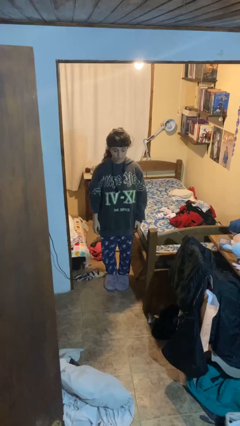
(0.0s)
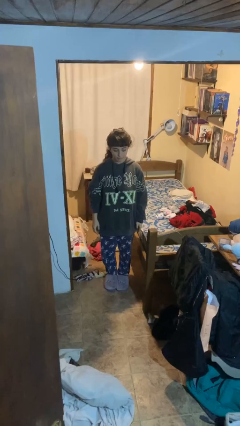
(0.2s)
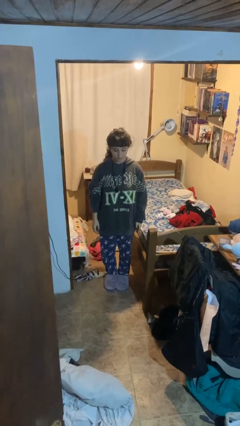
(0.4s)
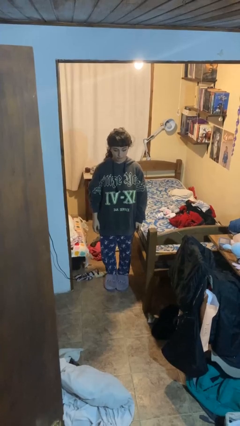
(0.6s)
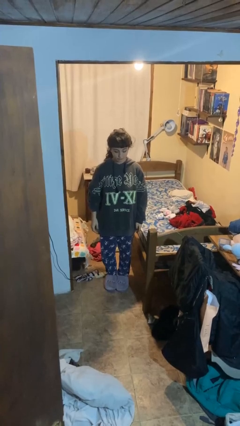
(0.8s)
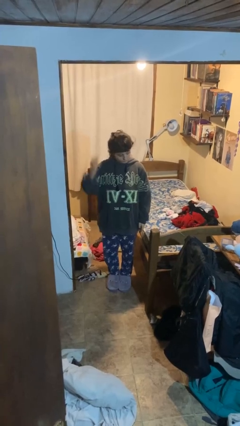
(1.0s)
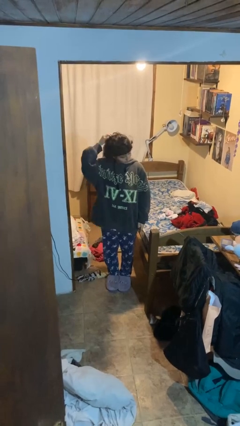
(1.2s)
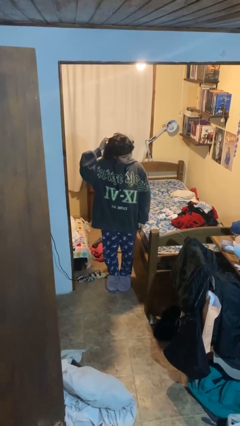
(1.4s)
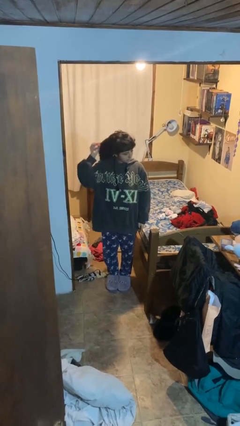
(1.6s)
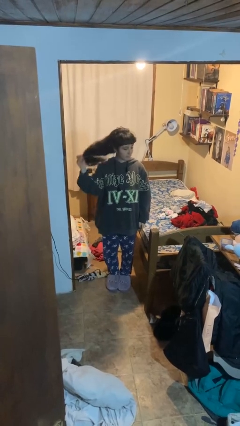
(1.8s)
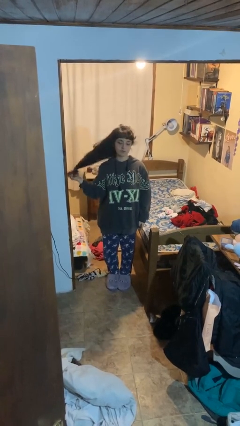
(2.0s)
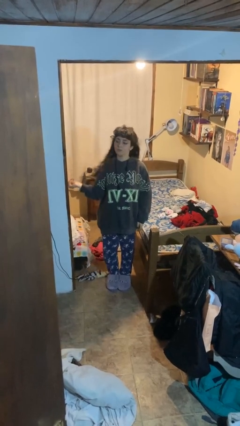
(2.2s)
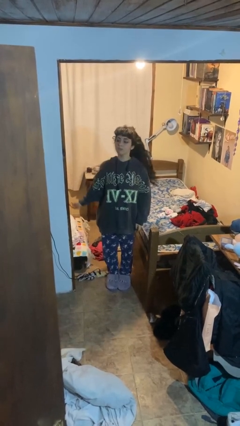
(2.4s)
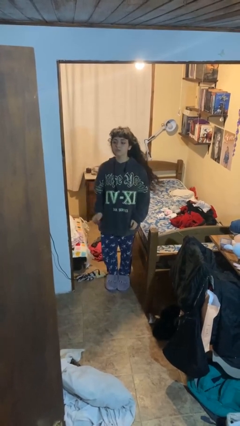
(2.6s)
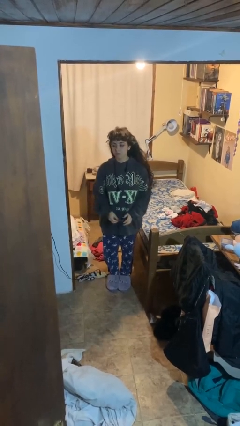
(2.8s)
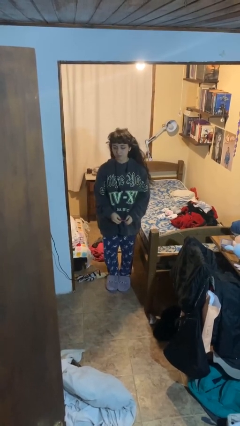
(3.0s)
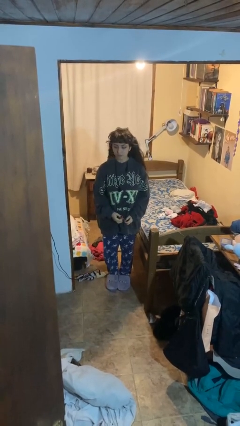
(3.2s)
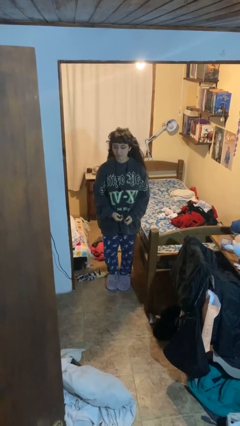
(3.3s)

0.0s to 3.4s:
person takes off hairtie

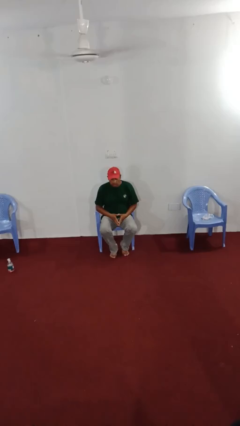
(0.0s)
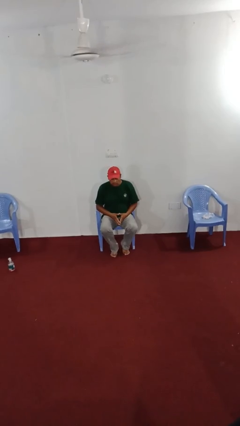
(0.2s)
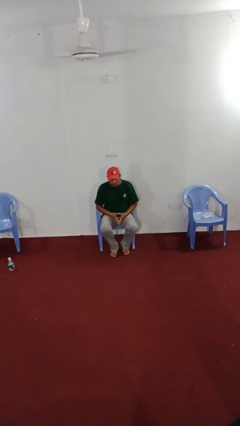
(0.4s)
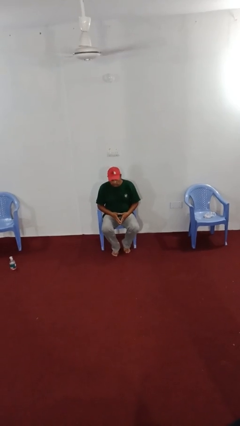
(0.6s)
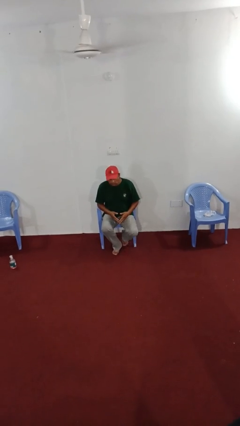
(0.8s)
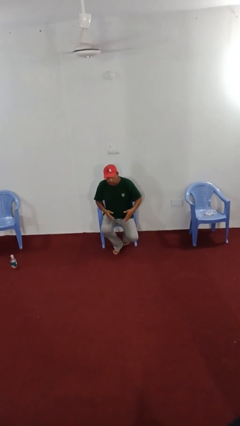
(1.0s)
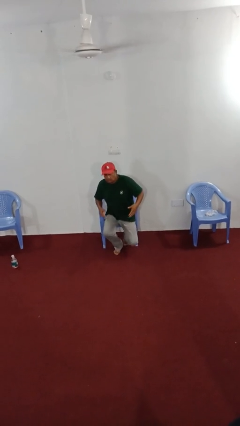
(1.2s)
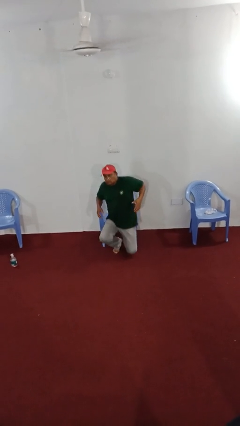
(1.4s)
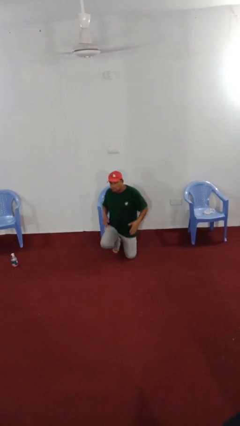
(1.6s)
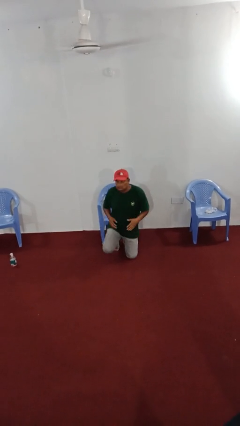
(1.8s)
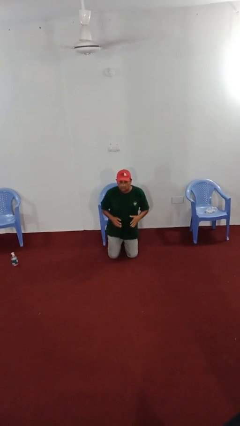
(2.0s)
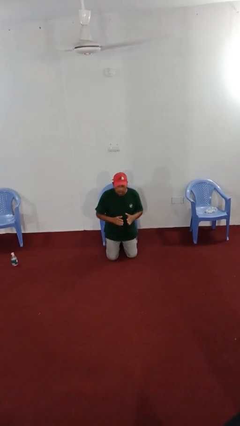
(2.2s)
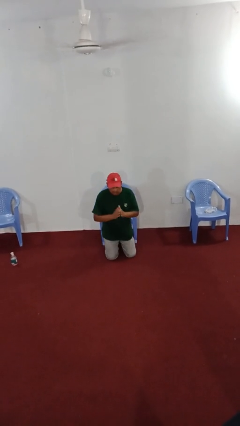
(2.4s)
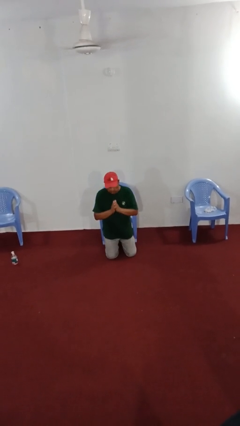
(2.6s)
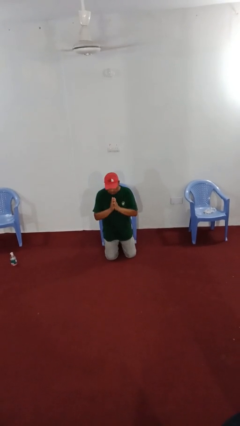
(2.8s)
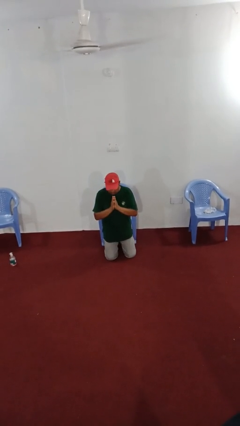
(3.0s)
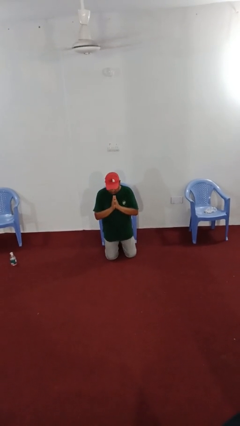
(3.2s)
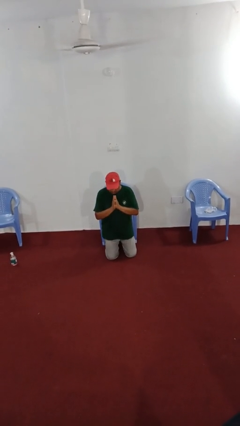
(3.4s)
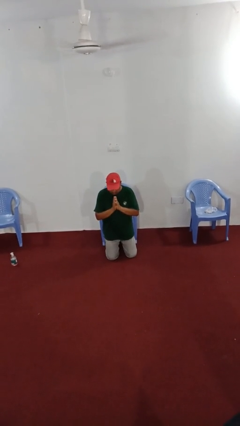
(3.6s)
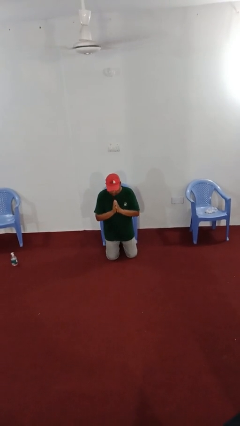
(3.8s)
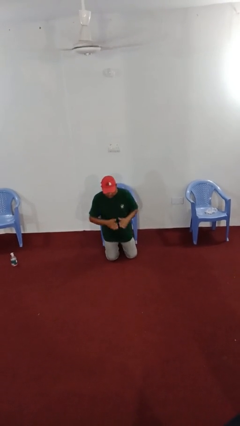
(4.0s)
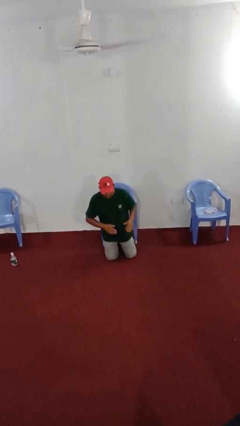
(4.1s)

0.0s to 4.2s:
person prays

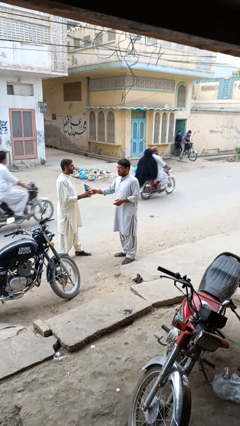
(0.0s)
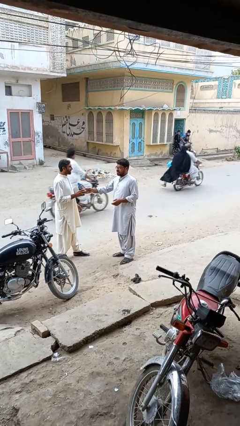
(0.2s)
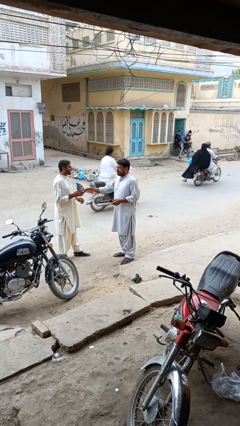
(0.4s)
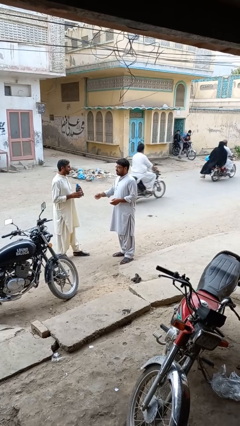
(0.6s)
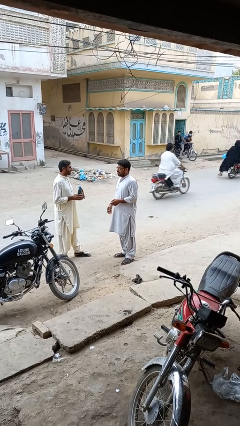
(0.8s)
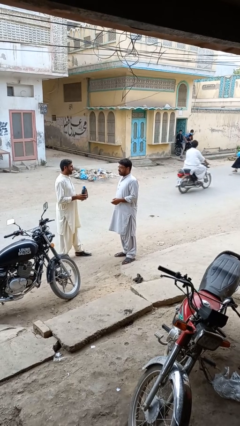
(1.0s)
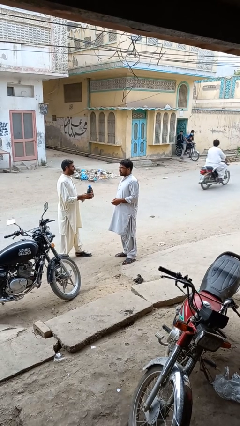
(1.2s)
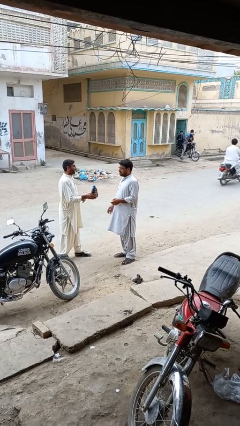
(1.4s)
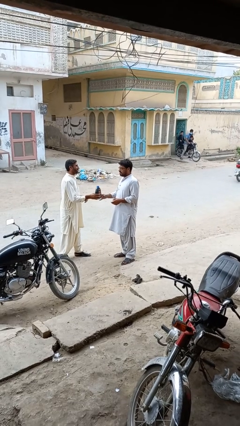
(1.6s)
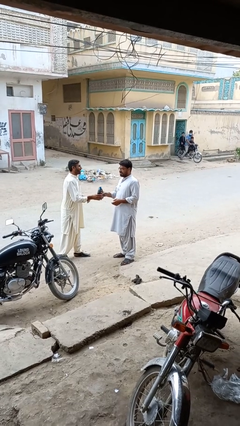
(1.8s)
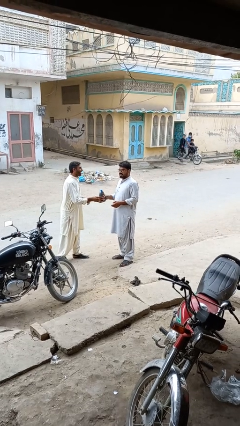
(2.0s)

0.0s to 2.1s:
person transfers object to person

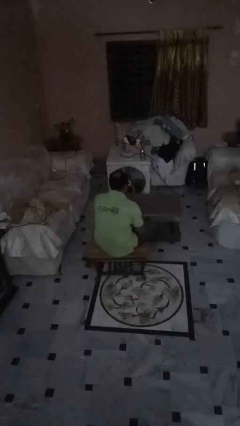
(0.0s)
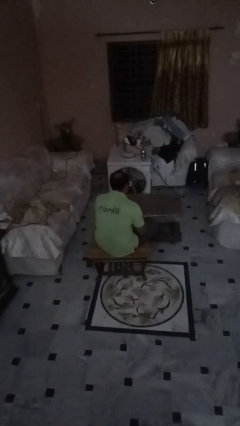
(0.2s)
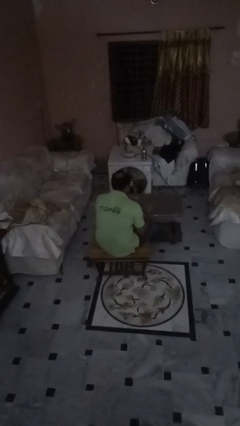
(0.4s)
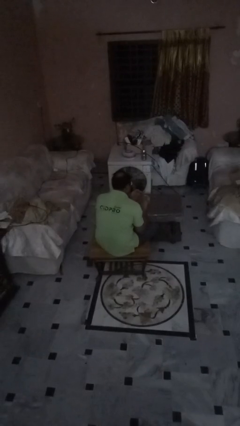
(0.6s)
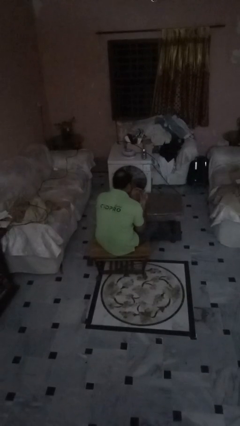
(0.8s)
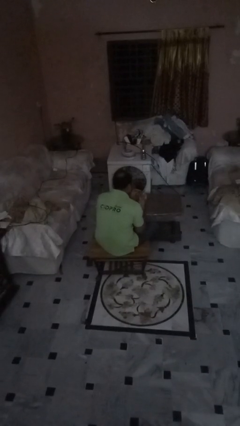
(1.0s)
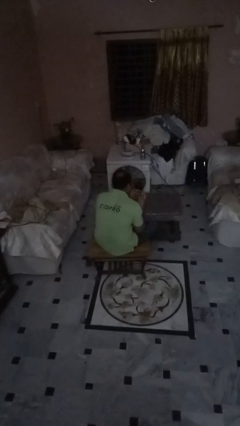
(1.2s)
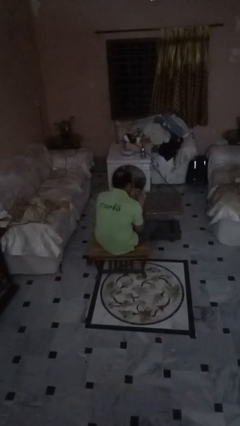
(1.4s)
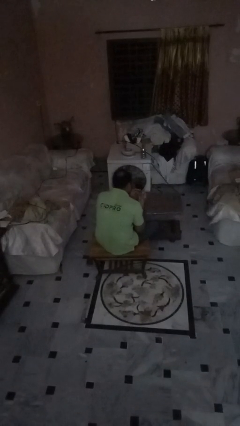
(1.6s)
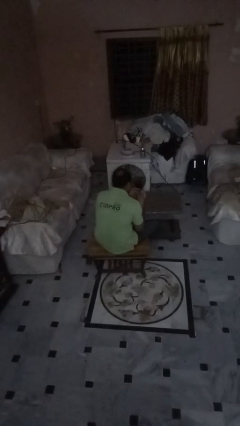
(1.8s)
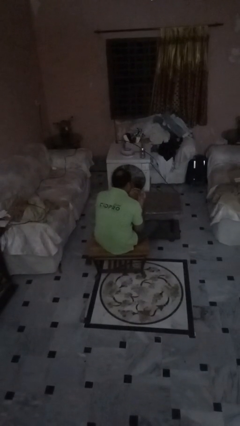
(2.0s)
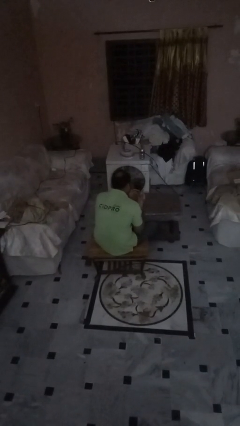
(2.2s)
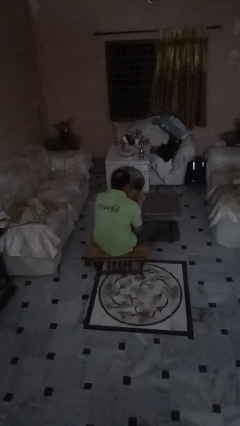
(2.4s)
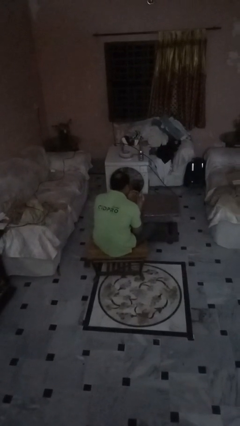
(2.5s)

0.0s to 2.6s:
person clips fingernails

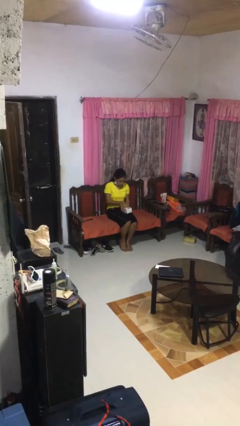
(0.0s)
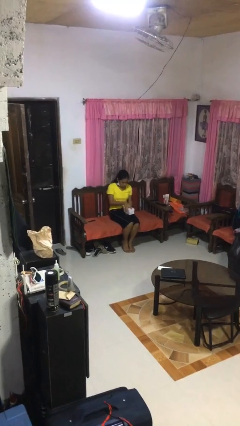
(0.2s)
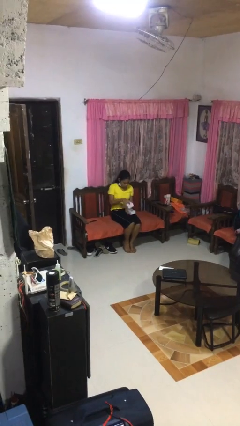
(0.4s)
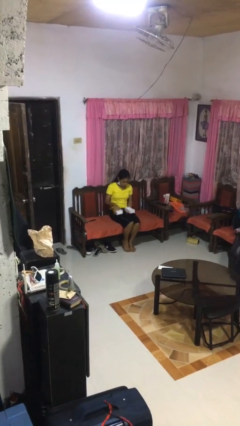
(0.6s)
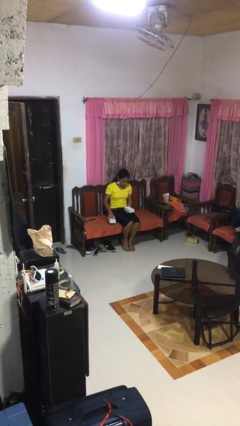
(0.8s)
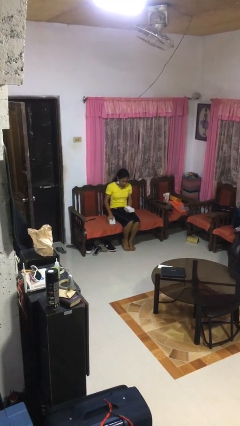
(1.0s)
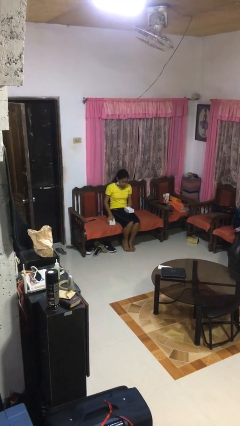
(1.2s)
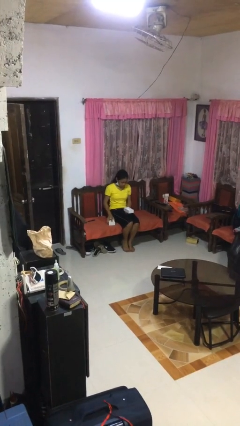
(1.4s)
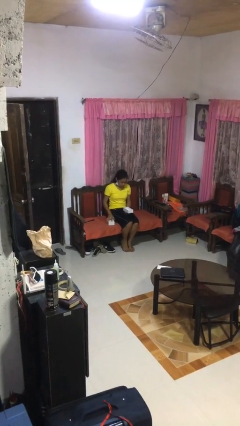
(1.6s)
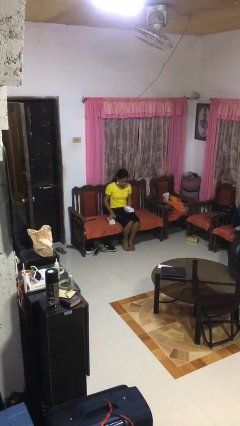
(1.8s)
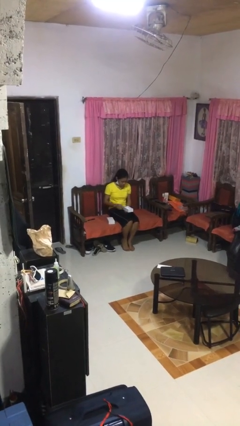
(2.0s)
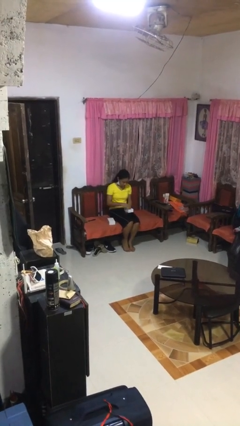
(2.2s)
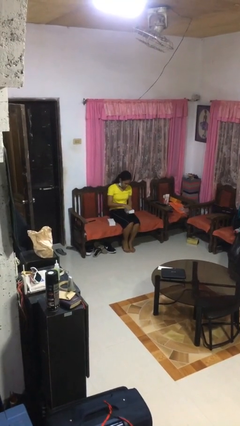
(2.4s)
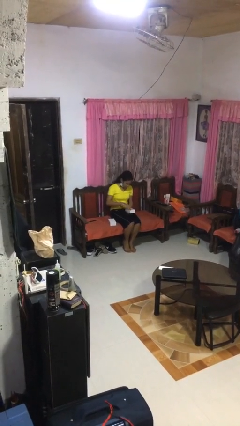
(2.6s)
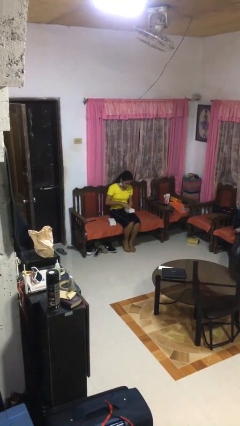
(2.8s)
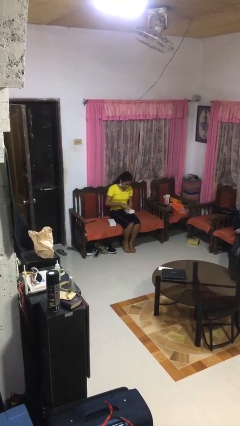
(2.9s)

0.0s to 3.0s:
person opens jewelry box

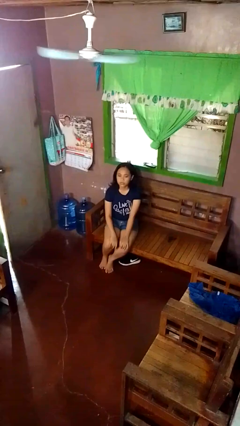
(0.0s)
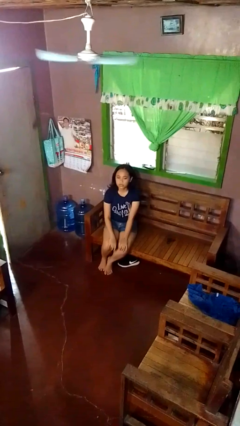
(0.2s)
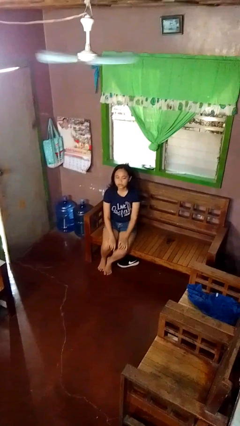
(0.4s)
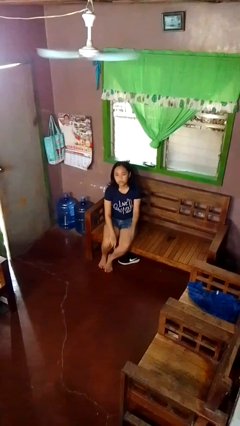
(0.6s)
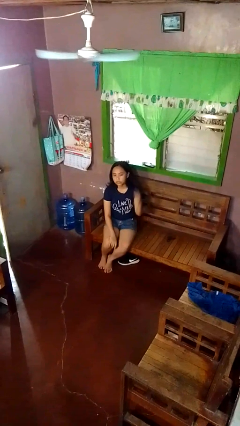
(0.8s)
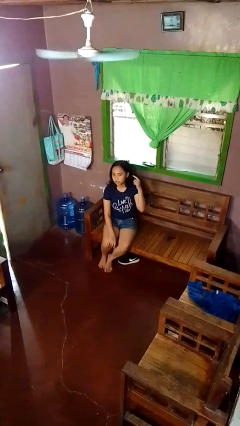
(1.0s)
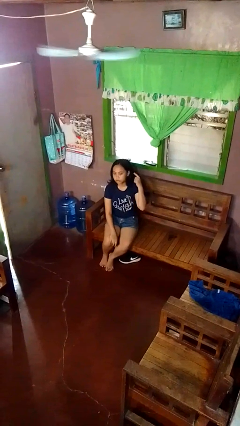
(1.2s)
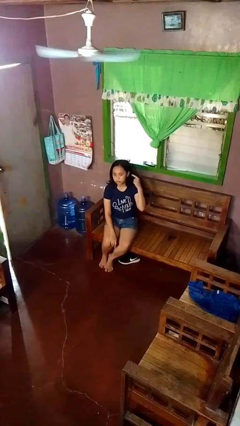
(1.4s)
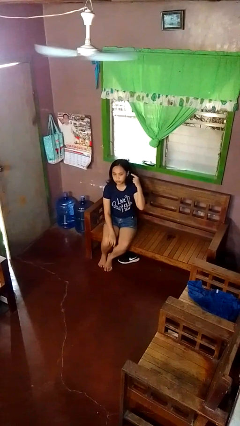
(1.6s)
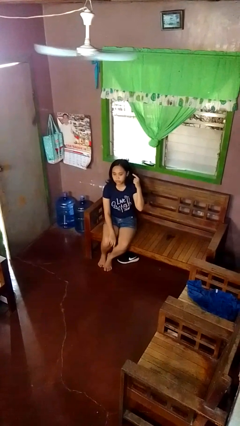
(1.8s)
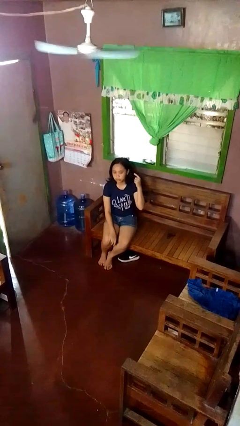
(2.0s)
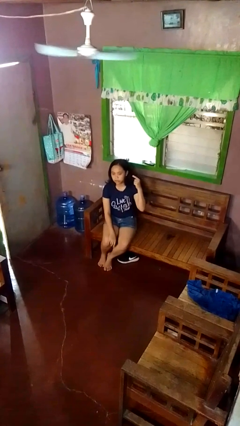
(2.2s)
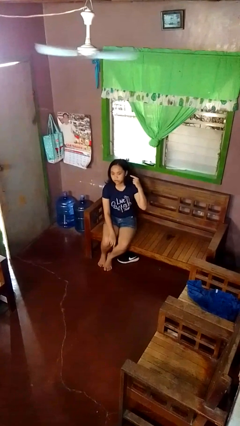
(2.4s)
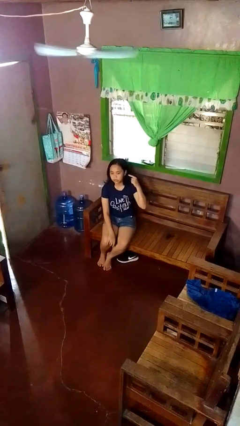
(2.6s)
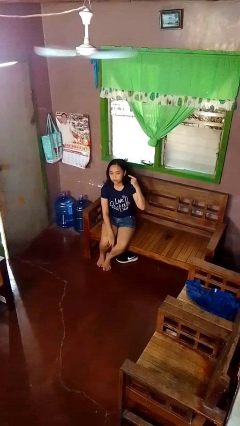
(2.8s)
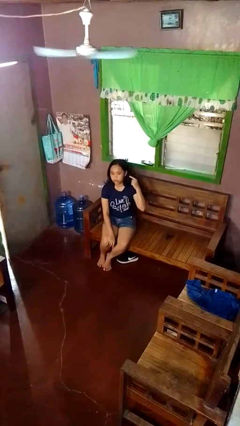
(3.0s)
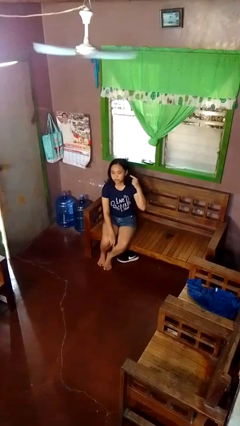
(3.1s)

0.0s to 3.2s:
person gestures listen closely
